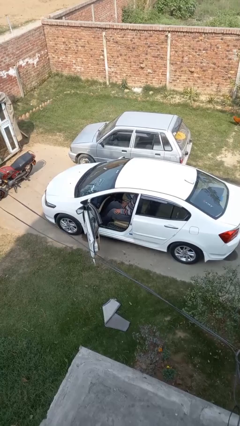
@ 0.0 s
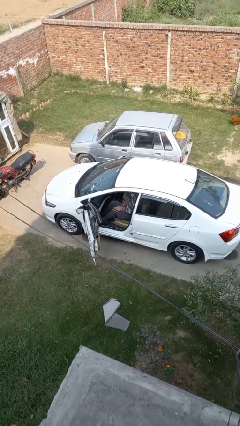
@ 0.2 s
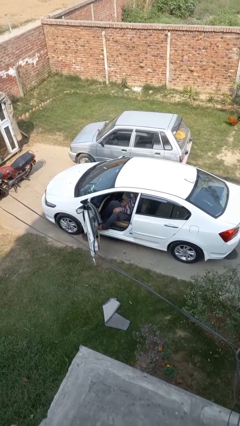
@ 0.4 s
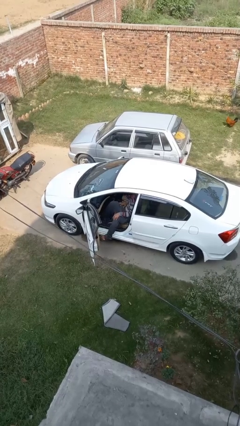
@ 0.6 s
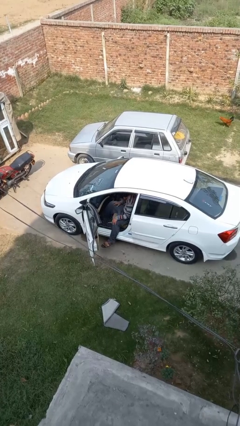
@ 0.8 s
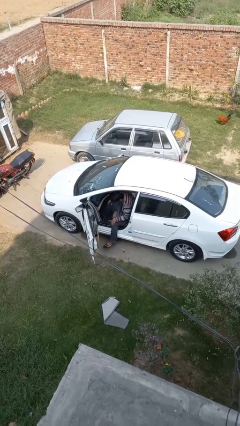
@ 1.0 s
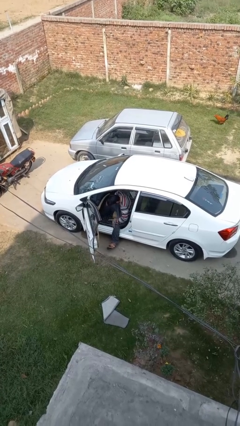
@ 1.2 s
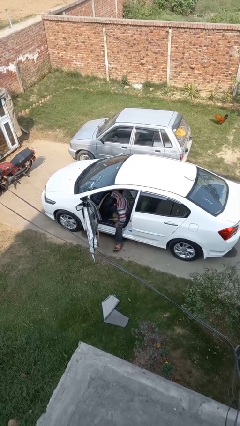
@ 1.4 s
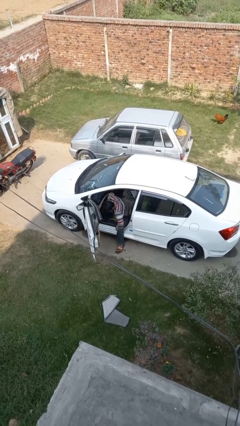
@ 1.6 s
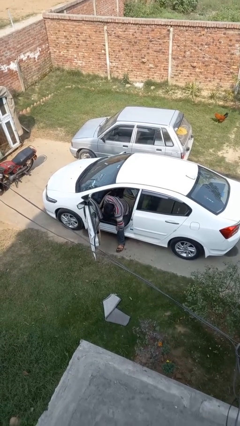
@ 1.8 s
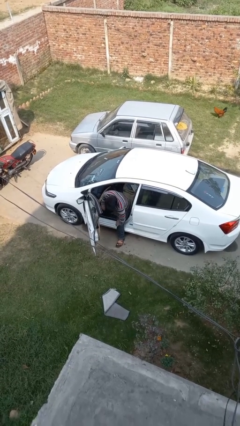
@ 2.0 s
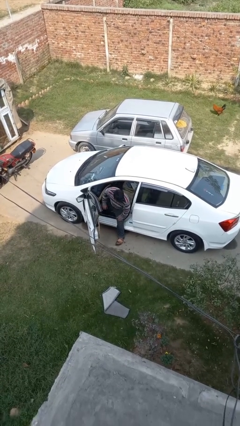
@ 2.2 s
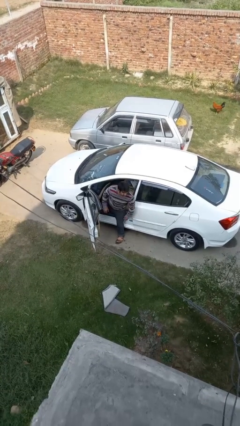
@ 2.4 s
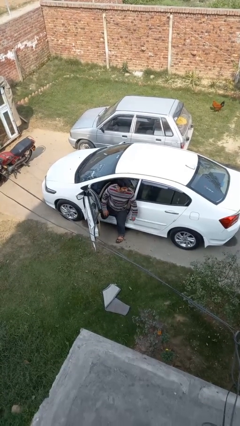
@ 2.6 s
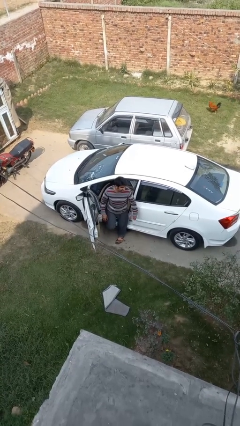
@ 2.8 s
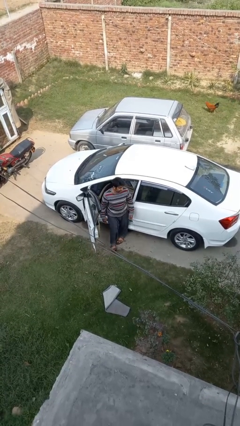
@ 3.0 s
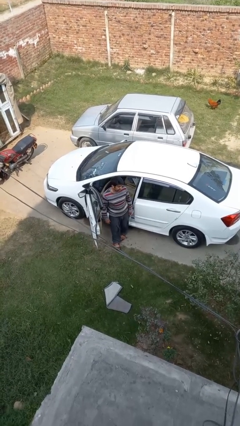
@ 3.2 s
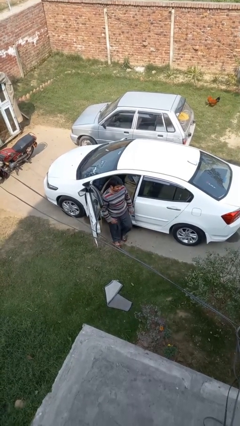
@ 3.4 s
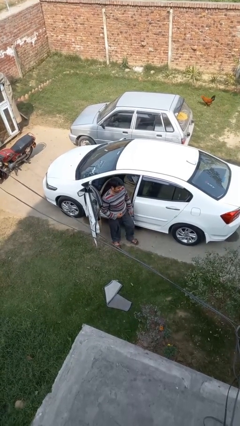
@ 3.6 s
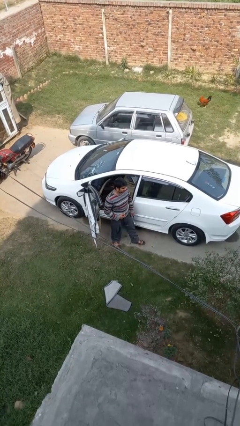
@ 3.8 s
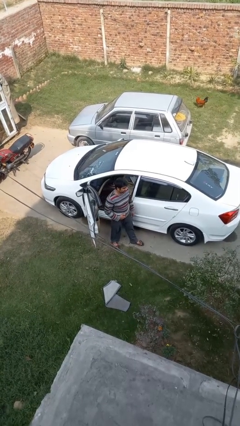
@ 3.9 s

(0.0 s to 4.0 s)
person exits car

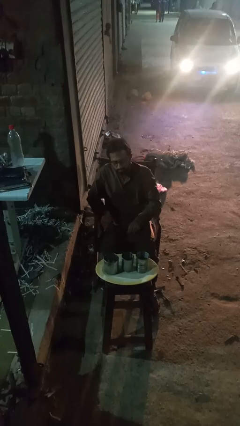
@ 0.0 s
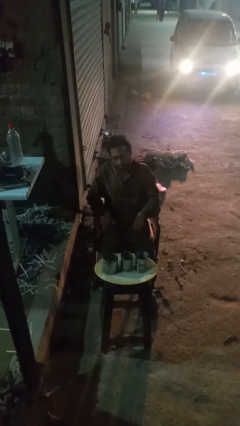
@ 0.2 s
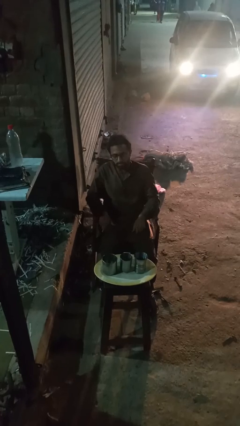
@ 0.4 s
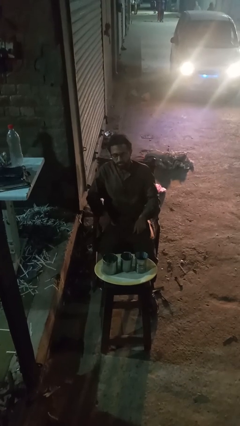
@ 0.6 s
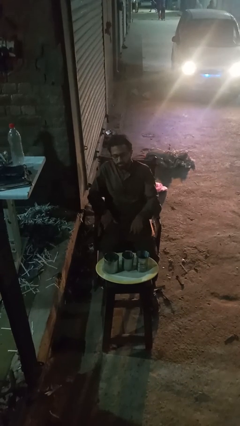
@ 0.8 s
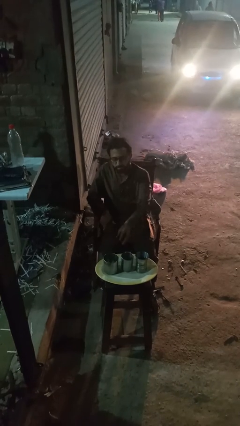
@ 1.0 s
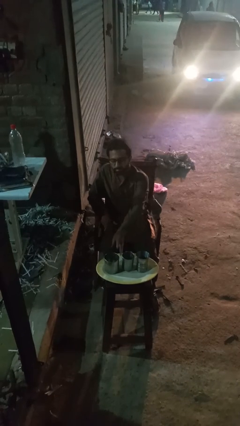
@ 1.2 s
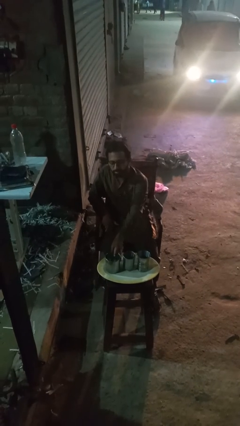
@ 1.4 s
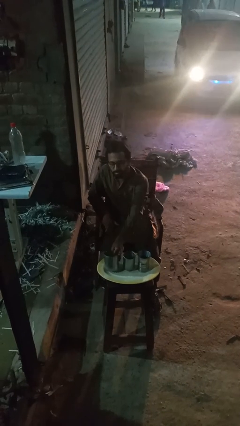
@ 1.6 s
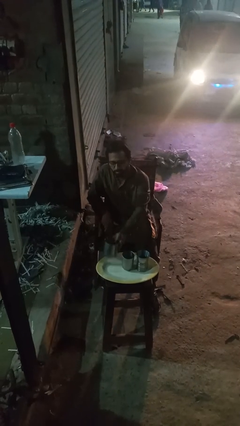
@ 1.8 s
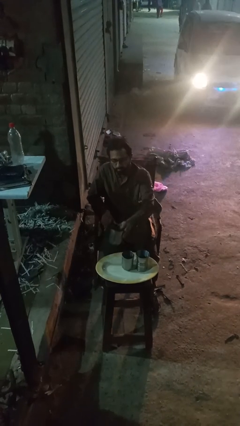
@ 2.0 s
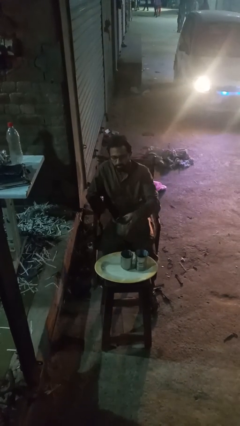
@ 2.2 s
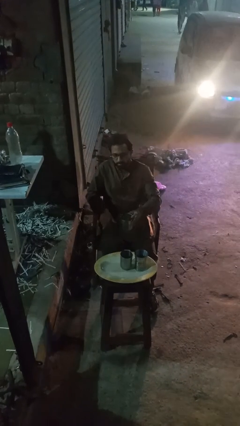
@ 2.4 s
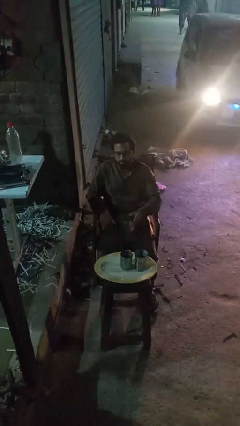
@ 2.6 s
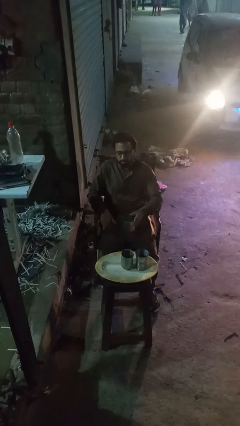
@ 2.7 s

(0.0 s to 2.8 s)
person picks up object from table

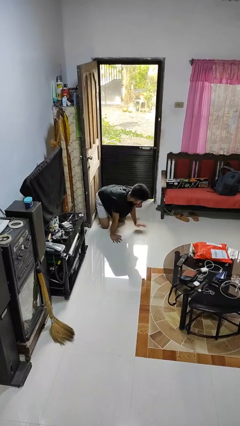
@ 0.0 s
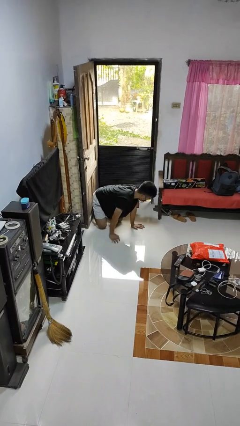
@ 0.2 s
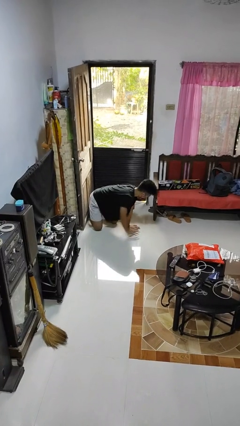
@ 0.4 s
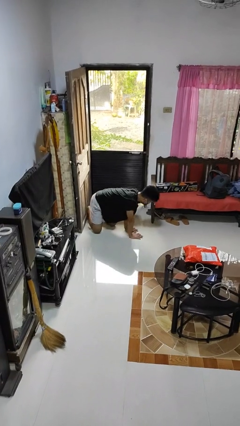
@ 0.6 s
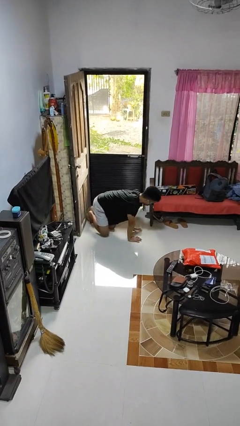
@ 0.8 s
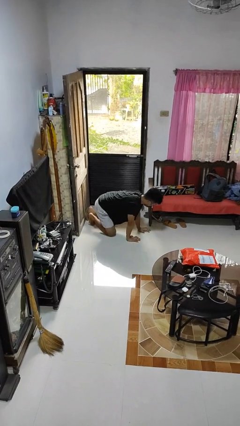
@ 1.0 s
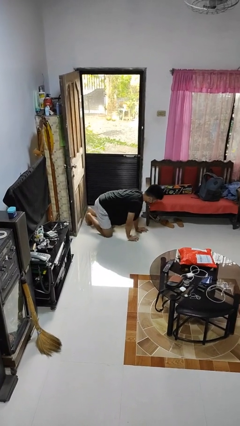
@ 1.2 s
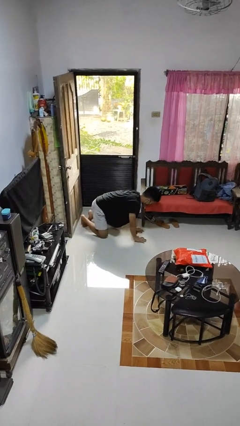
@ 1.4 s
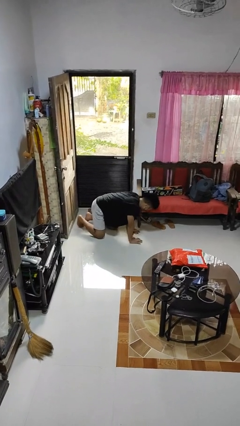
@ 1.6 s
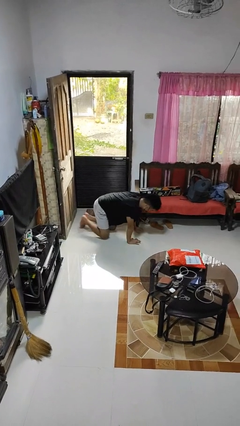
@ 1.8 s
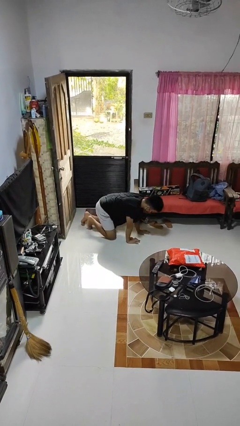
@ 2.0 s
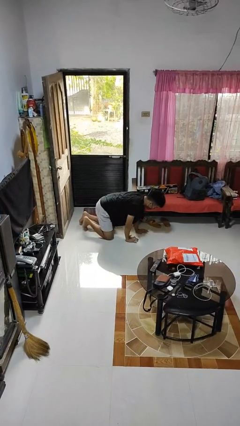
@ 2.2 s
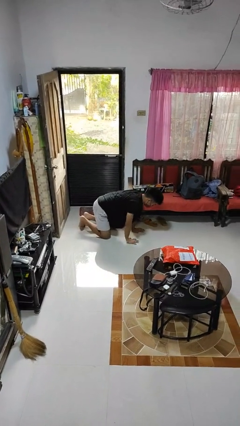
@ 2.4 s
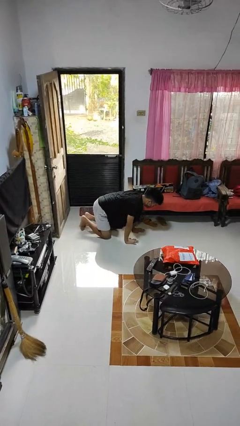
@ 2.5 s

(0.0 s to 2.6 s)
person crawls

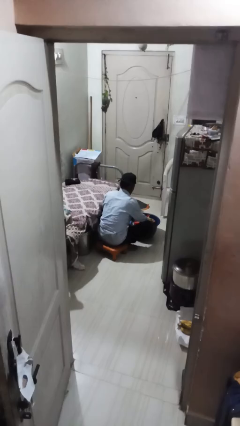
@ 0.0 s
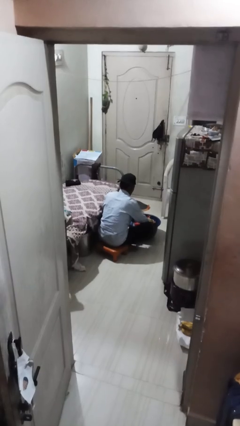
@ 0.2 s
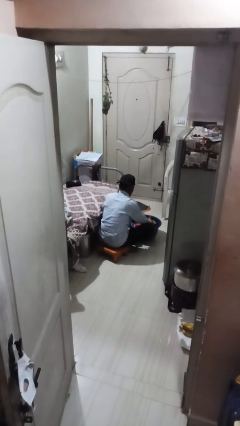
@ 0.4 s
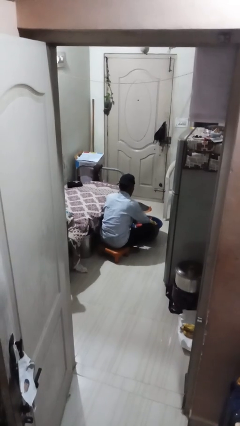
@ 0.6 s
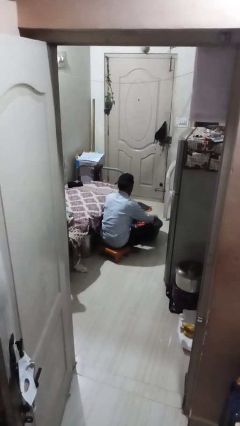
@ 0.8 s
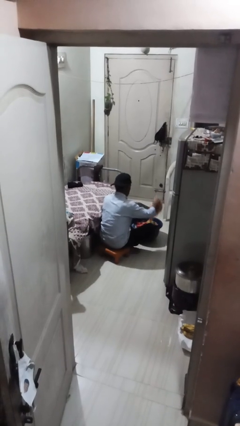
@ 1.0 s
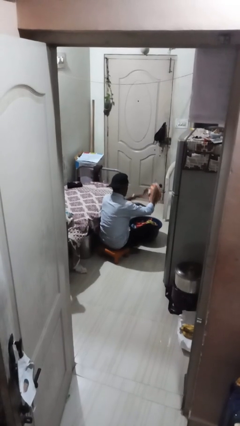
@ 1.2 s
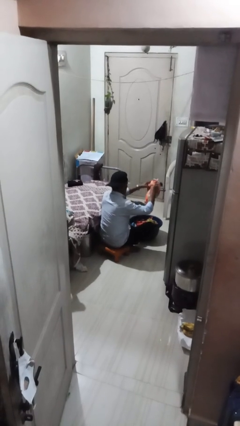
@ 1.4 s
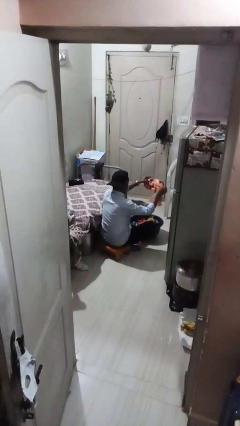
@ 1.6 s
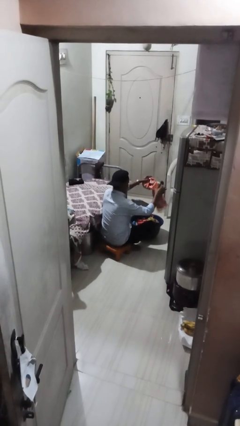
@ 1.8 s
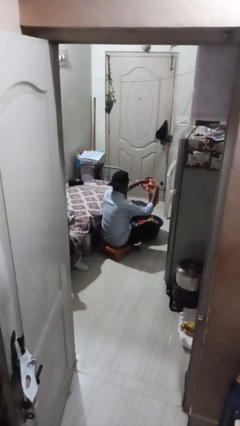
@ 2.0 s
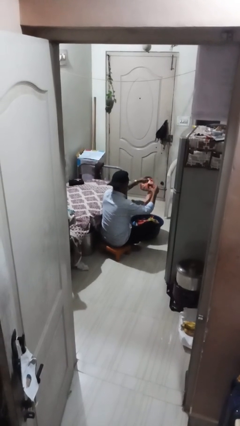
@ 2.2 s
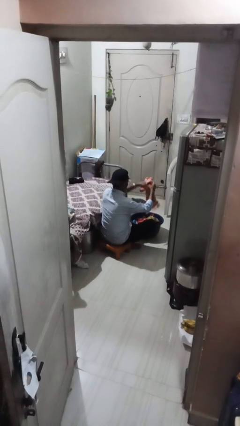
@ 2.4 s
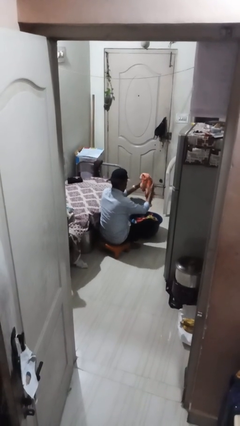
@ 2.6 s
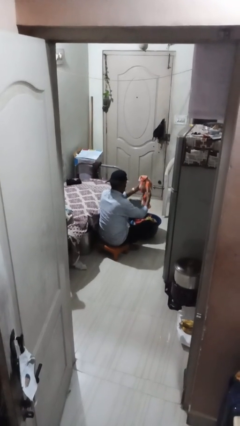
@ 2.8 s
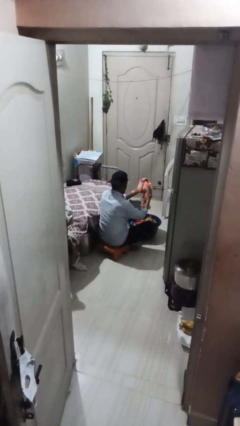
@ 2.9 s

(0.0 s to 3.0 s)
person takes object from basket

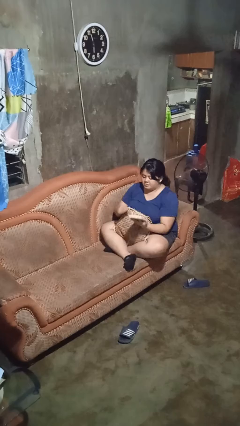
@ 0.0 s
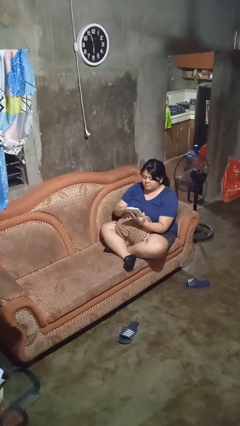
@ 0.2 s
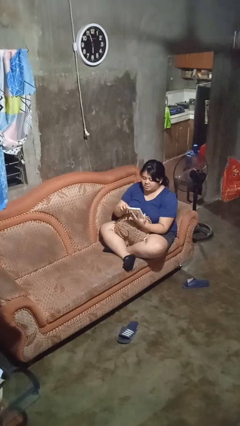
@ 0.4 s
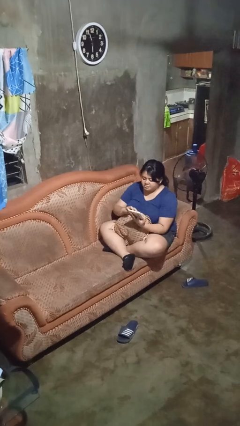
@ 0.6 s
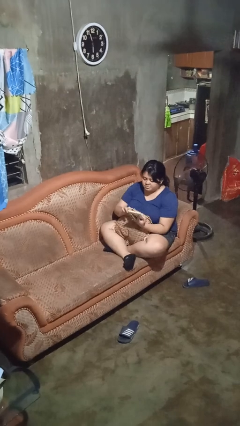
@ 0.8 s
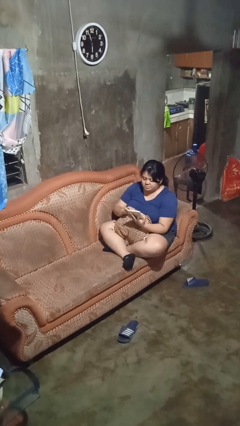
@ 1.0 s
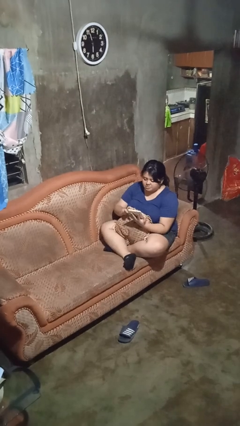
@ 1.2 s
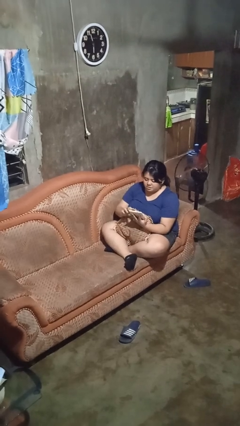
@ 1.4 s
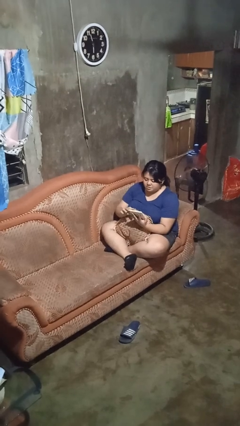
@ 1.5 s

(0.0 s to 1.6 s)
person interacts with tablet

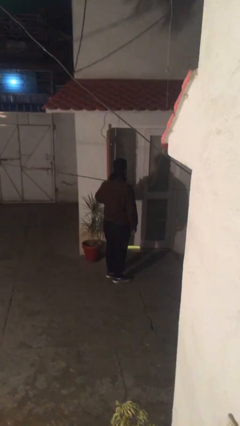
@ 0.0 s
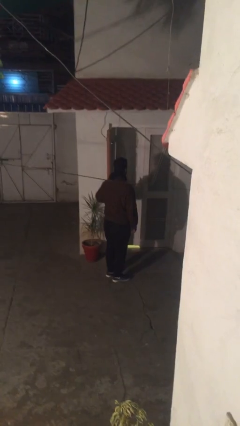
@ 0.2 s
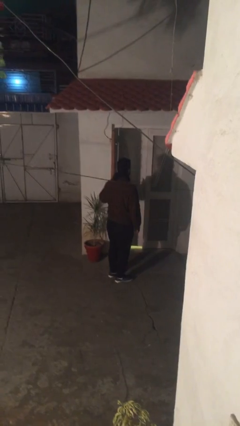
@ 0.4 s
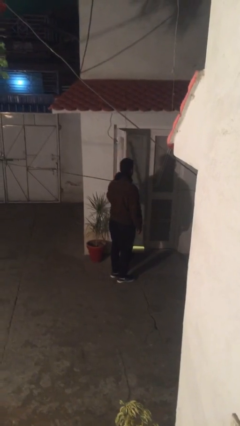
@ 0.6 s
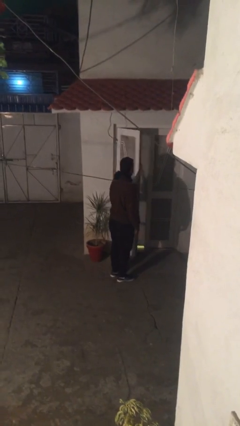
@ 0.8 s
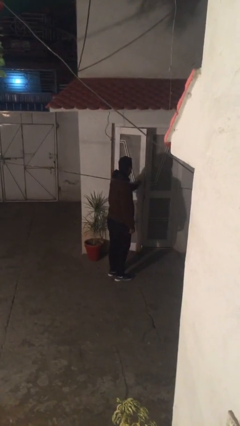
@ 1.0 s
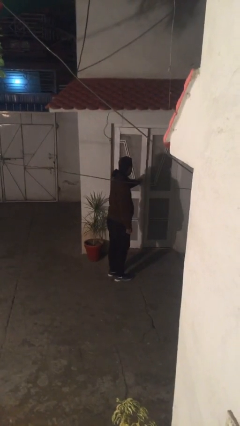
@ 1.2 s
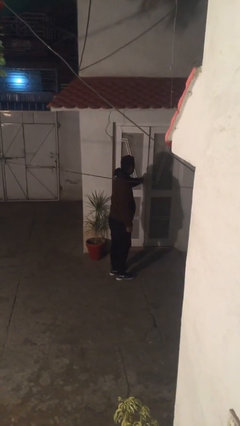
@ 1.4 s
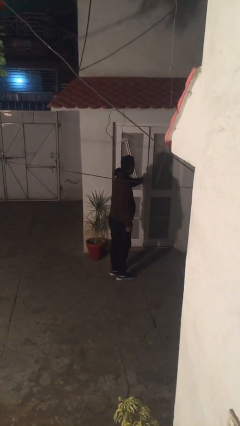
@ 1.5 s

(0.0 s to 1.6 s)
person closes facility door

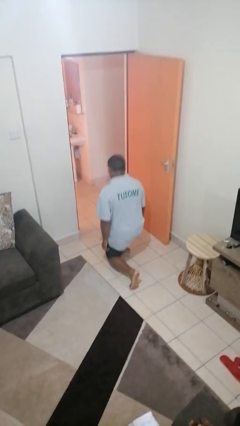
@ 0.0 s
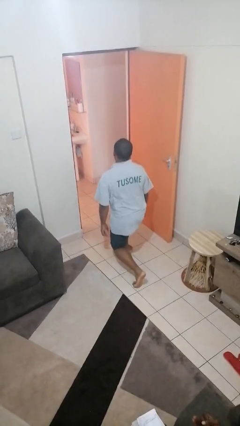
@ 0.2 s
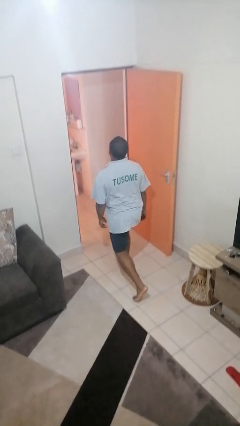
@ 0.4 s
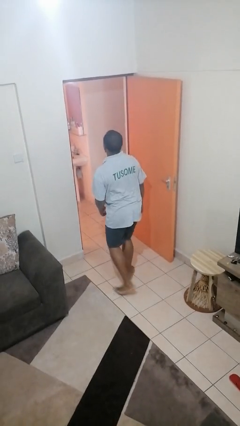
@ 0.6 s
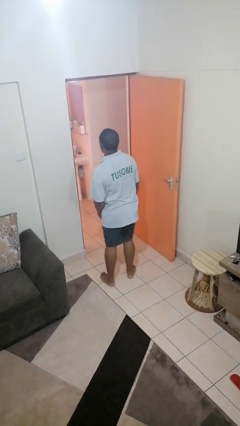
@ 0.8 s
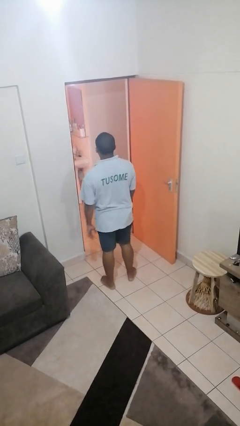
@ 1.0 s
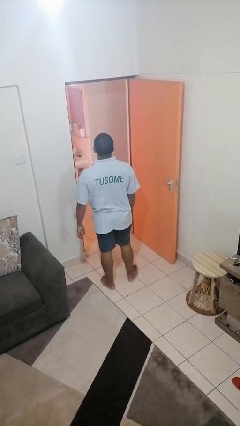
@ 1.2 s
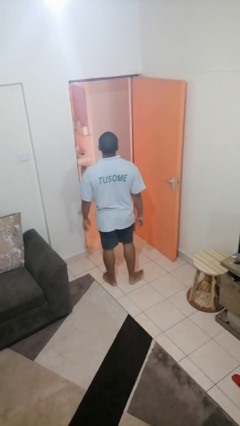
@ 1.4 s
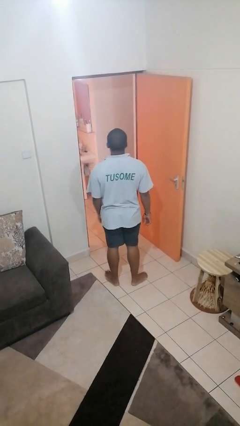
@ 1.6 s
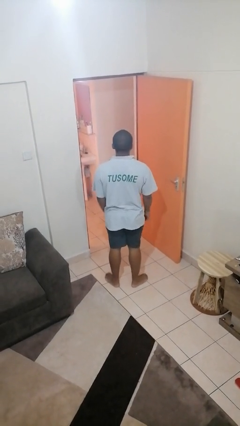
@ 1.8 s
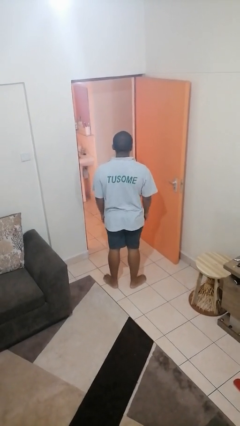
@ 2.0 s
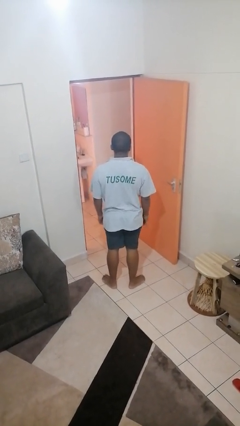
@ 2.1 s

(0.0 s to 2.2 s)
person stands up from floor
